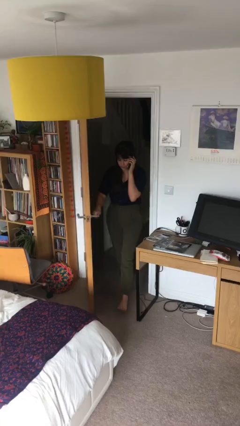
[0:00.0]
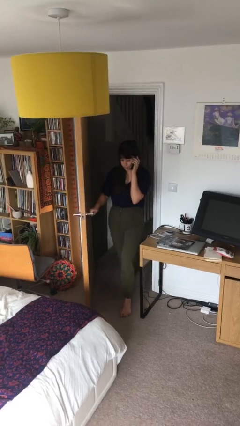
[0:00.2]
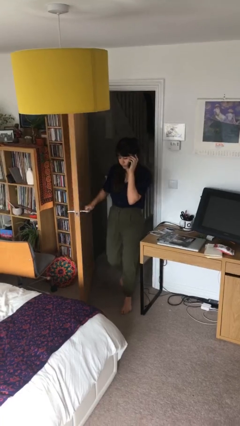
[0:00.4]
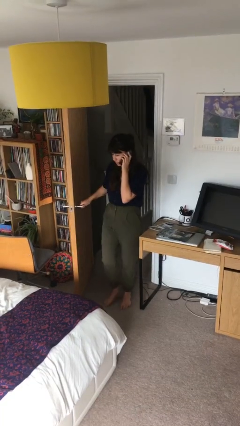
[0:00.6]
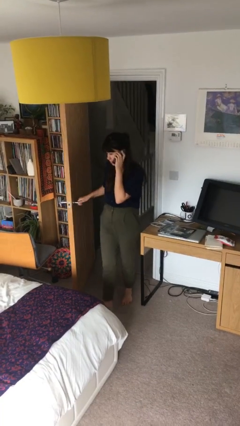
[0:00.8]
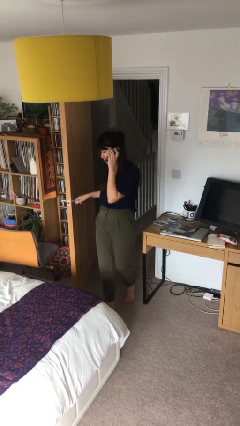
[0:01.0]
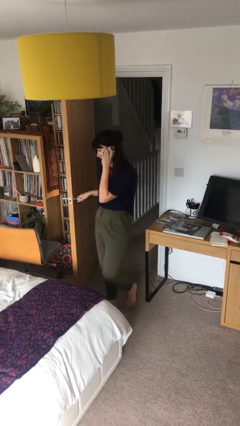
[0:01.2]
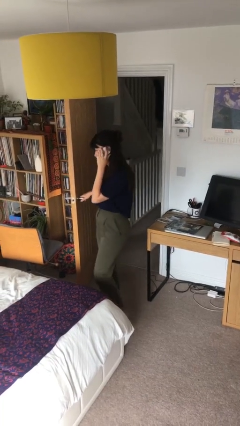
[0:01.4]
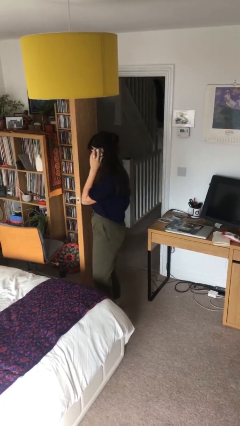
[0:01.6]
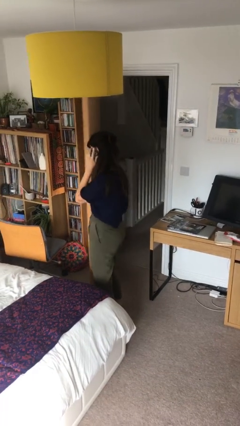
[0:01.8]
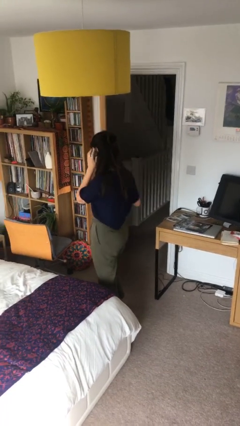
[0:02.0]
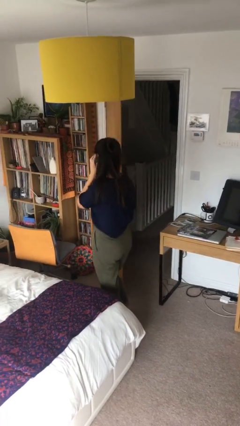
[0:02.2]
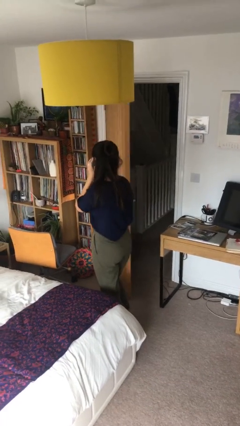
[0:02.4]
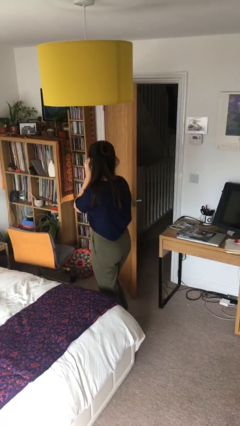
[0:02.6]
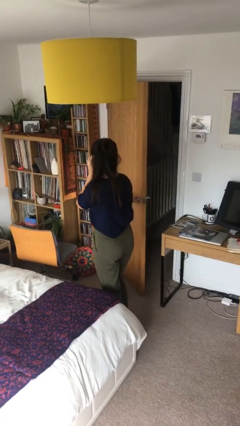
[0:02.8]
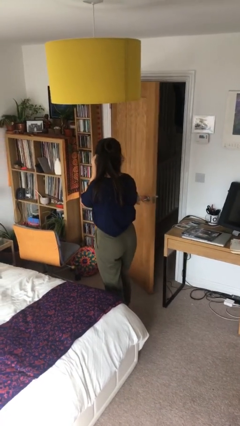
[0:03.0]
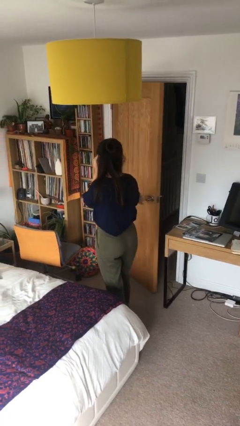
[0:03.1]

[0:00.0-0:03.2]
person enters scene through structure

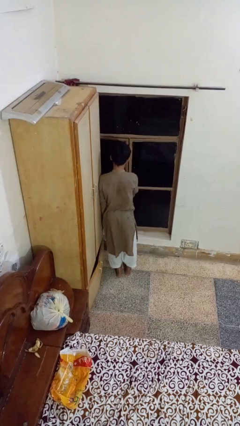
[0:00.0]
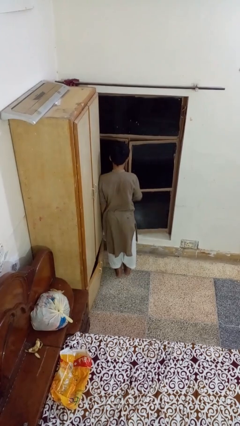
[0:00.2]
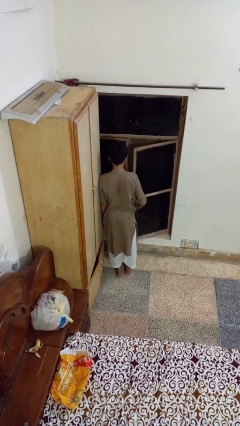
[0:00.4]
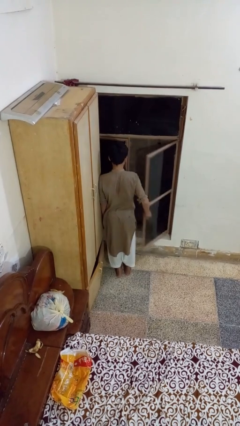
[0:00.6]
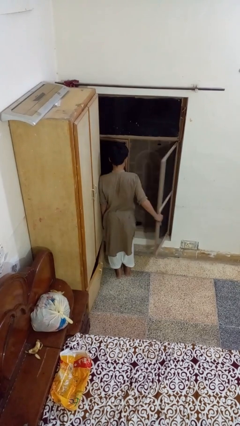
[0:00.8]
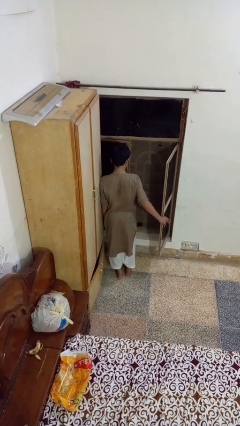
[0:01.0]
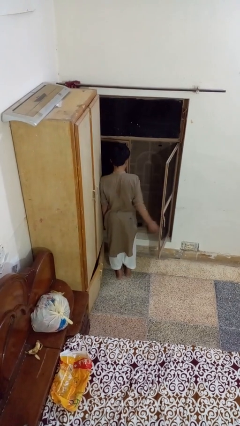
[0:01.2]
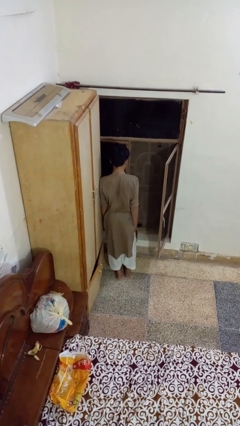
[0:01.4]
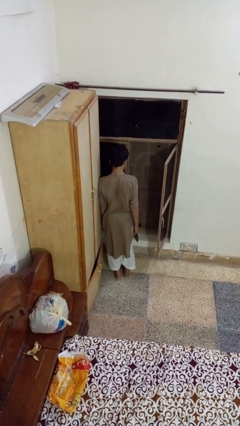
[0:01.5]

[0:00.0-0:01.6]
person opens home window

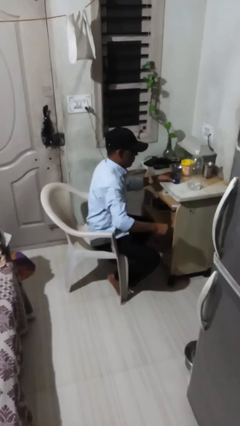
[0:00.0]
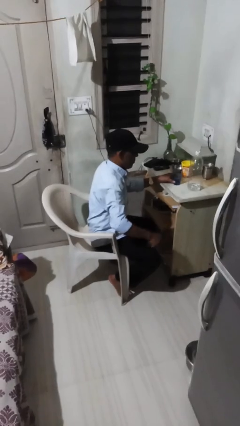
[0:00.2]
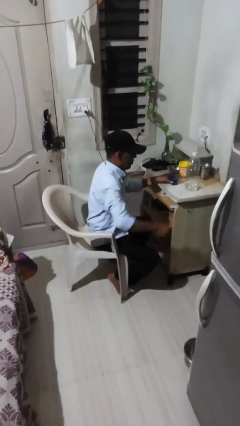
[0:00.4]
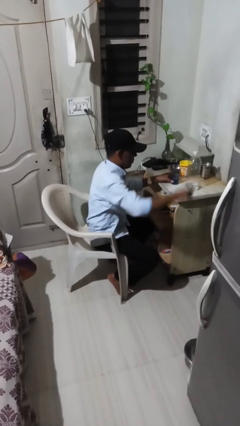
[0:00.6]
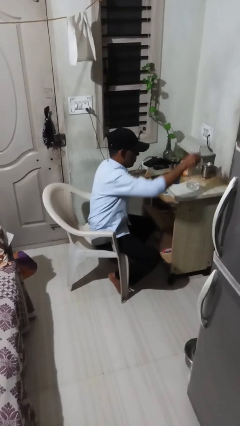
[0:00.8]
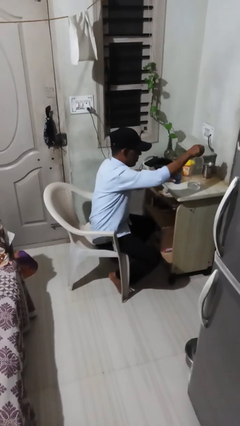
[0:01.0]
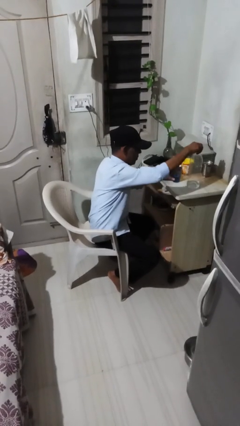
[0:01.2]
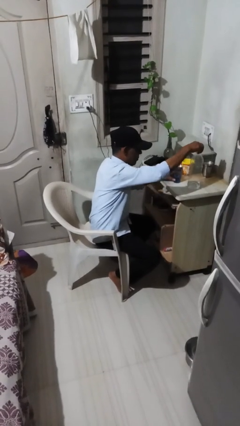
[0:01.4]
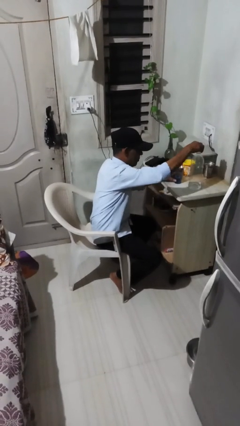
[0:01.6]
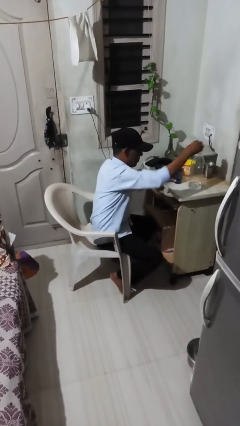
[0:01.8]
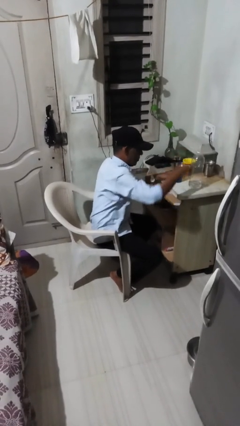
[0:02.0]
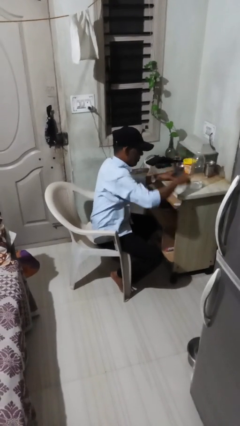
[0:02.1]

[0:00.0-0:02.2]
person unscrews lid from bottle

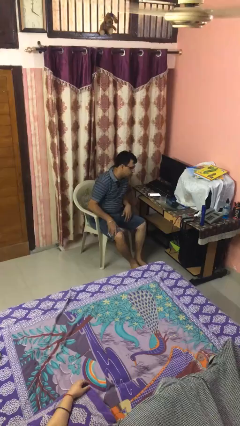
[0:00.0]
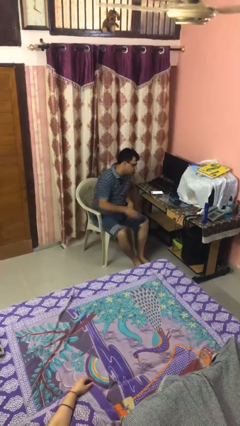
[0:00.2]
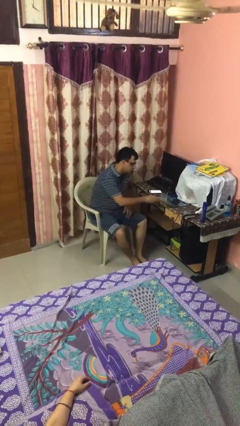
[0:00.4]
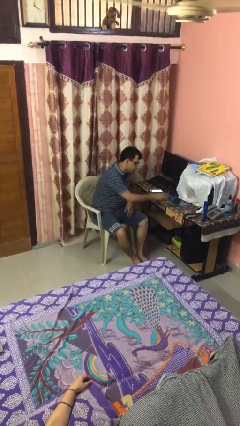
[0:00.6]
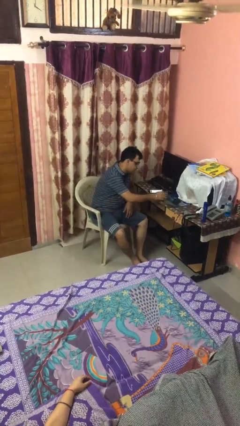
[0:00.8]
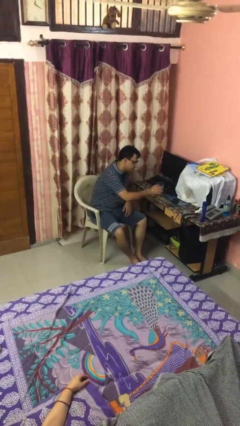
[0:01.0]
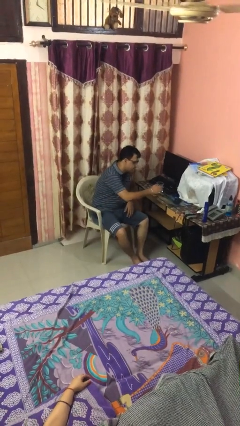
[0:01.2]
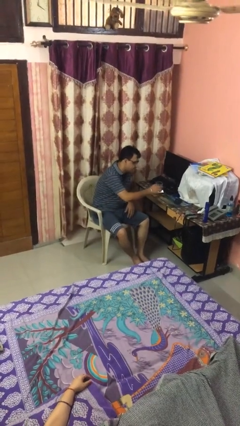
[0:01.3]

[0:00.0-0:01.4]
person picks up object from table

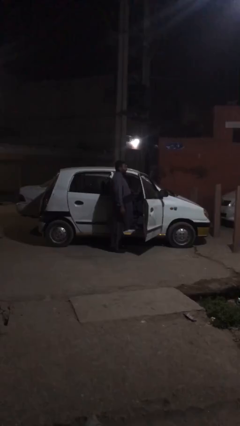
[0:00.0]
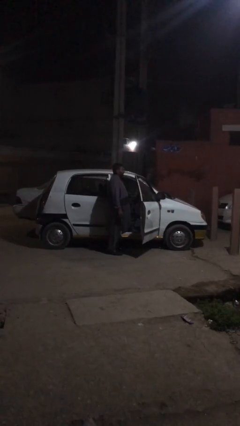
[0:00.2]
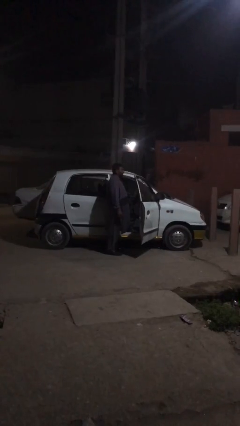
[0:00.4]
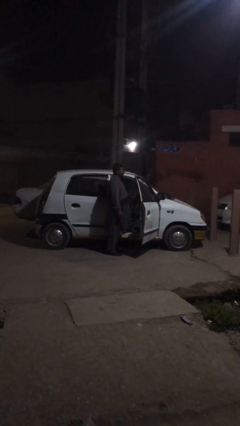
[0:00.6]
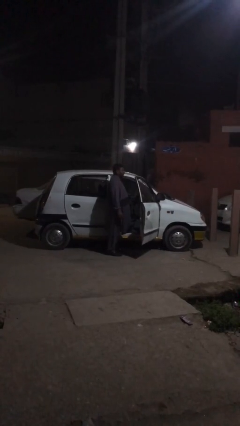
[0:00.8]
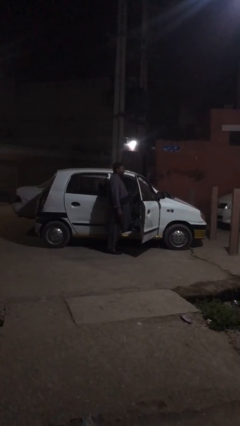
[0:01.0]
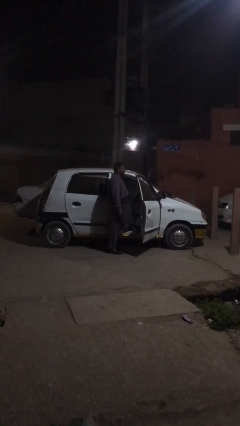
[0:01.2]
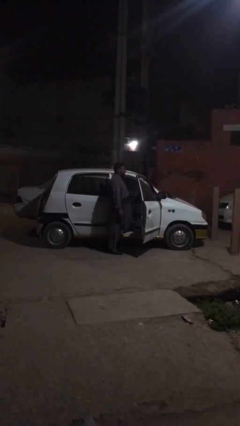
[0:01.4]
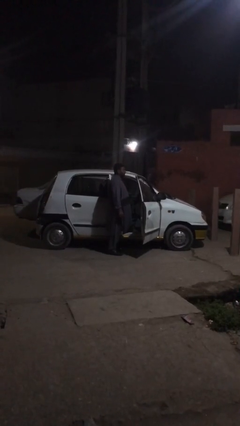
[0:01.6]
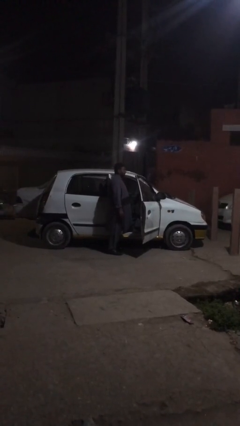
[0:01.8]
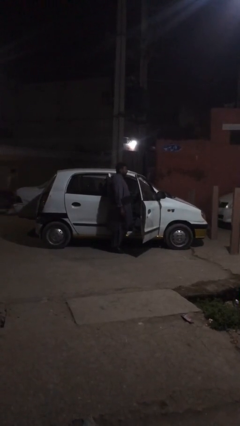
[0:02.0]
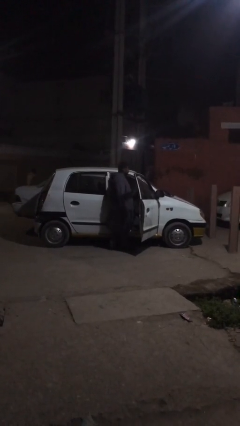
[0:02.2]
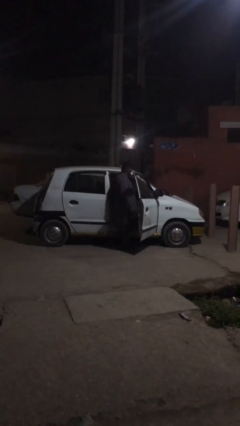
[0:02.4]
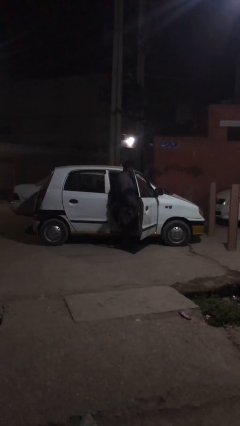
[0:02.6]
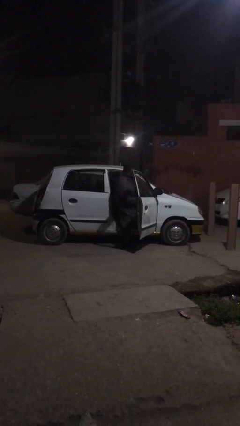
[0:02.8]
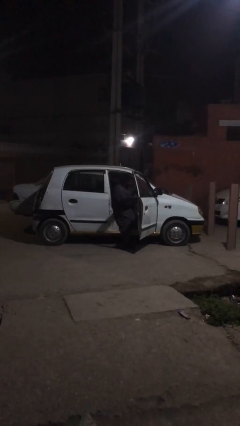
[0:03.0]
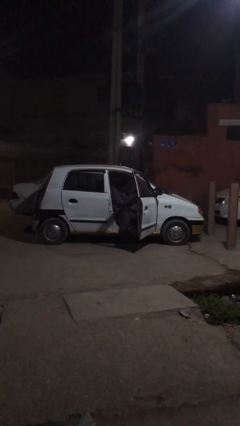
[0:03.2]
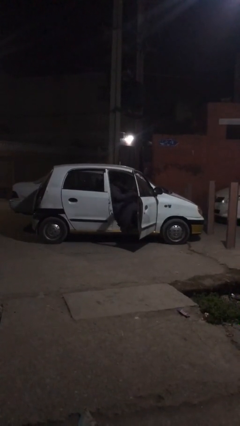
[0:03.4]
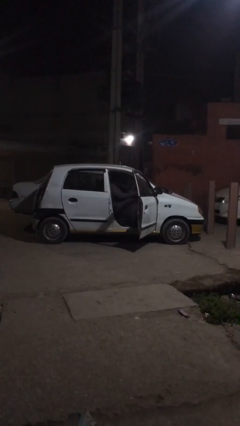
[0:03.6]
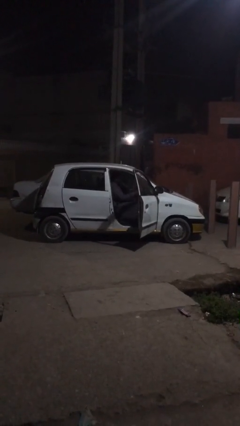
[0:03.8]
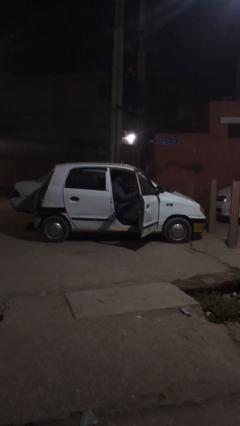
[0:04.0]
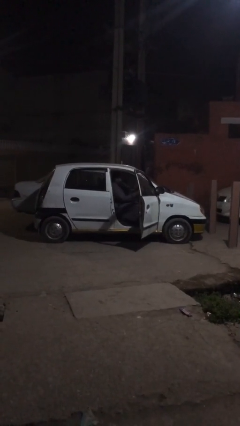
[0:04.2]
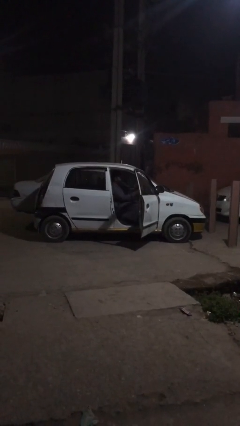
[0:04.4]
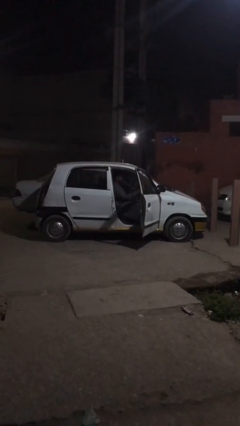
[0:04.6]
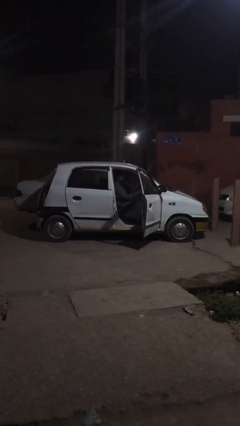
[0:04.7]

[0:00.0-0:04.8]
person enters car

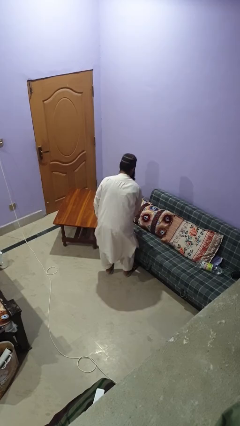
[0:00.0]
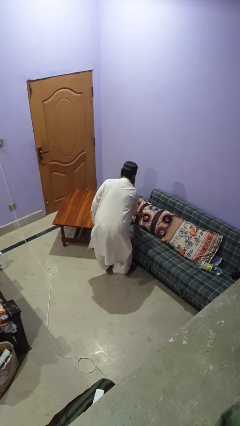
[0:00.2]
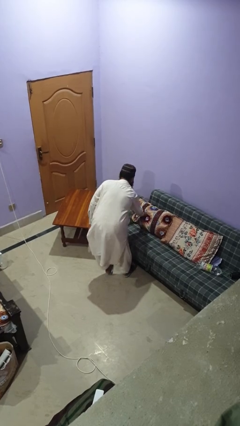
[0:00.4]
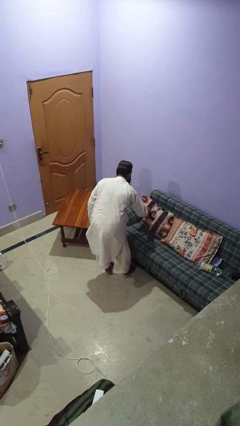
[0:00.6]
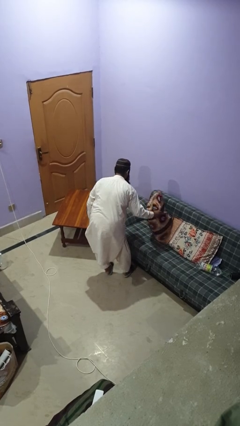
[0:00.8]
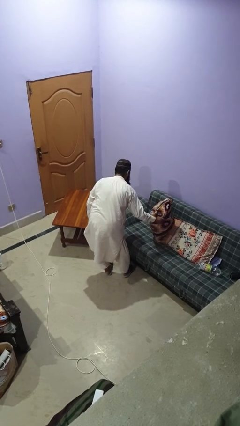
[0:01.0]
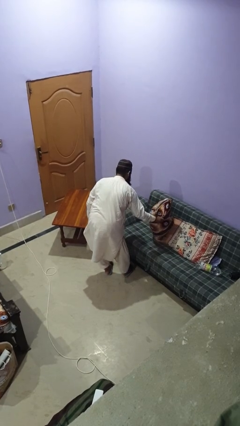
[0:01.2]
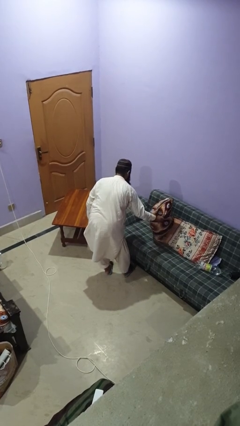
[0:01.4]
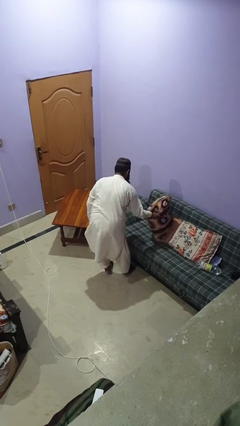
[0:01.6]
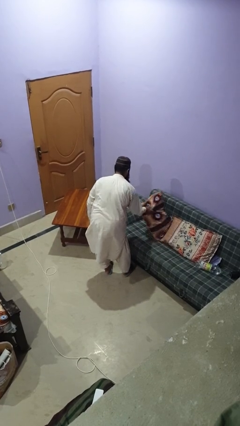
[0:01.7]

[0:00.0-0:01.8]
person searches in couch

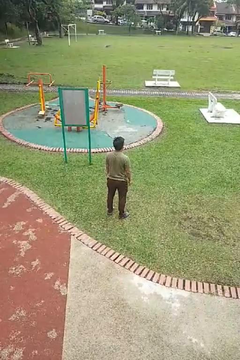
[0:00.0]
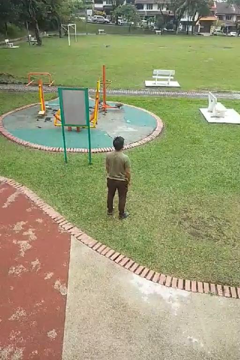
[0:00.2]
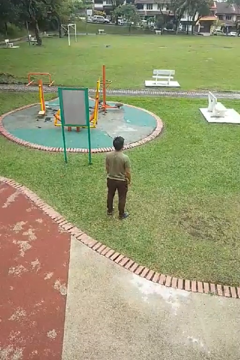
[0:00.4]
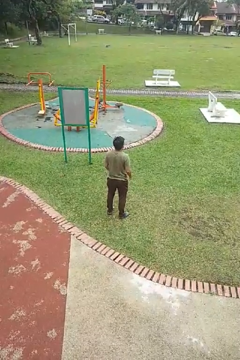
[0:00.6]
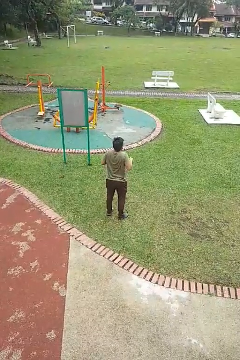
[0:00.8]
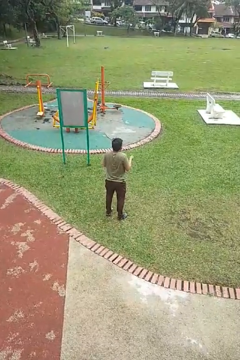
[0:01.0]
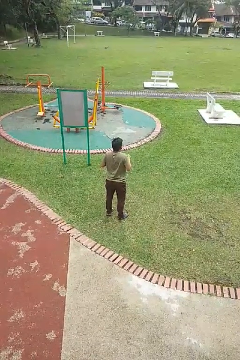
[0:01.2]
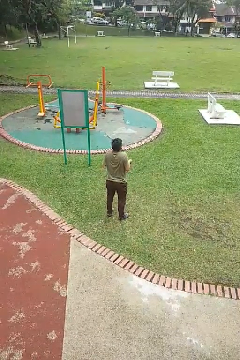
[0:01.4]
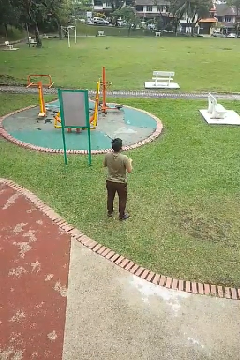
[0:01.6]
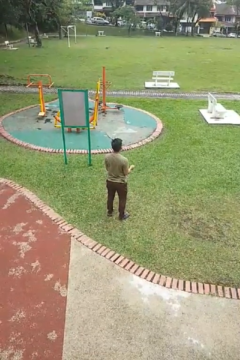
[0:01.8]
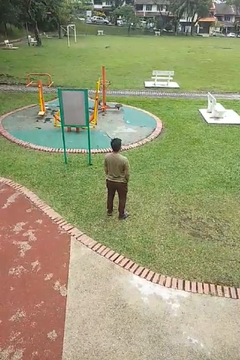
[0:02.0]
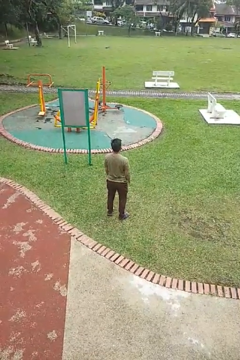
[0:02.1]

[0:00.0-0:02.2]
person shrugs

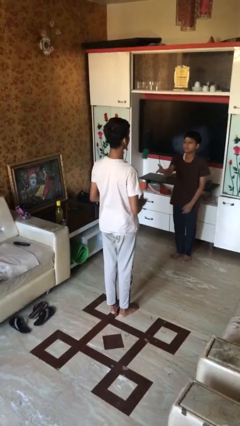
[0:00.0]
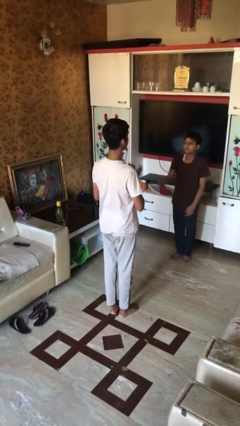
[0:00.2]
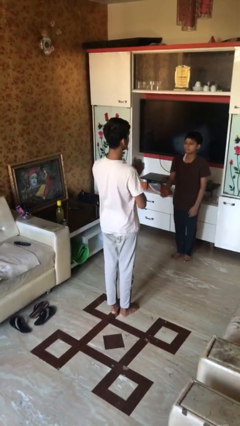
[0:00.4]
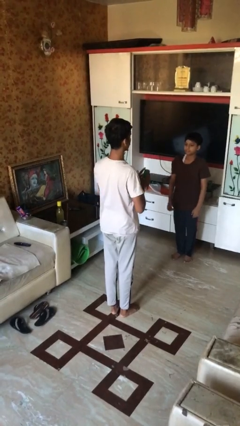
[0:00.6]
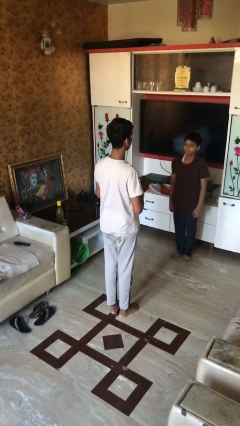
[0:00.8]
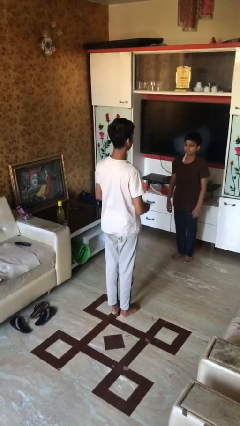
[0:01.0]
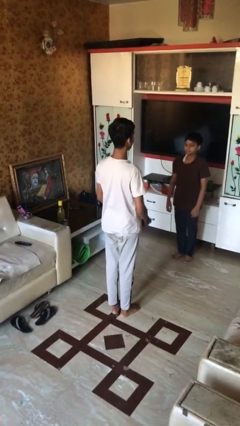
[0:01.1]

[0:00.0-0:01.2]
person catches object from person
